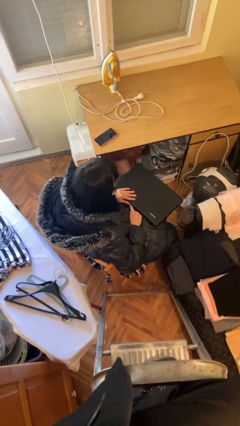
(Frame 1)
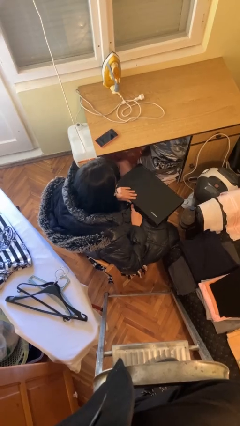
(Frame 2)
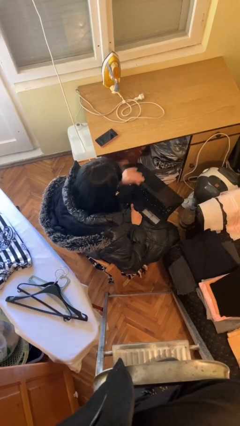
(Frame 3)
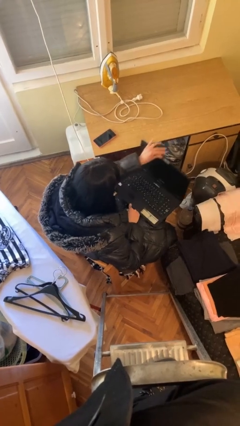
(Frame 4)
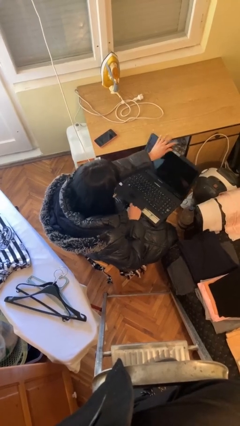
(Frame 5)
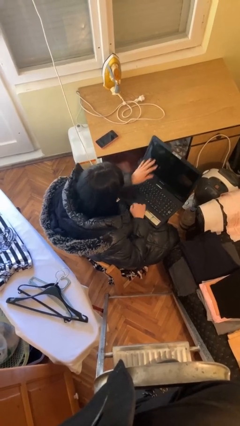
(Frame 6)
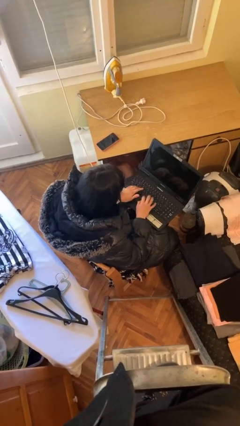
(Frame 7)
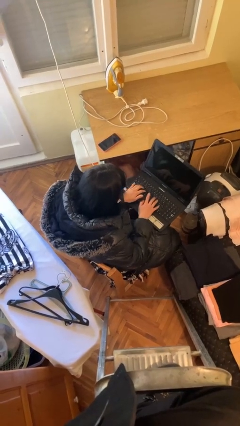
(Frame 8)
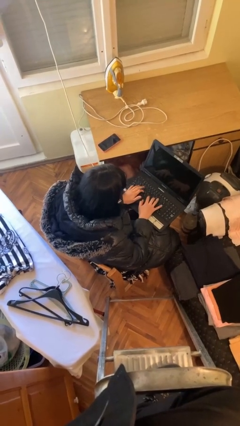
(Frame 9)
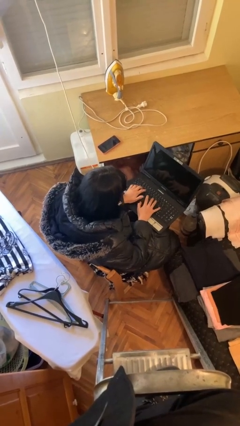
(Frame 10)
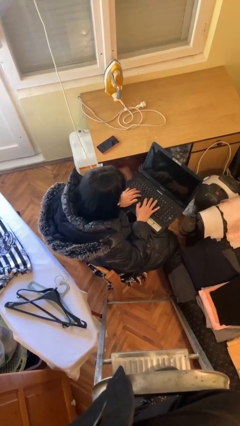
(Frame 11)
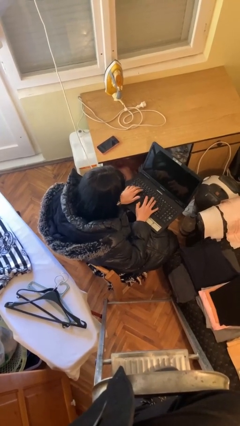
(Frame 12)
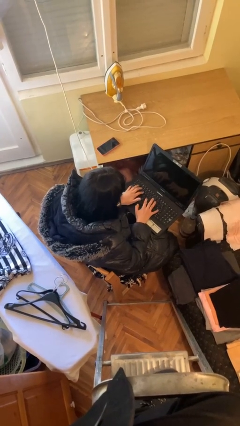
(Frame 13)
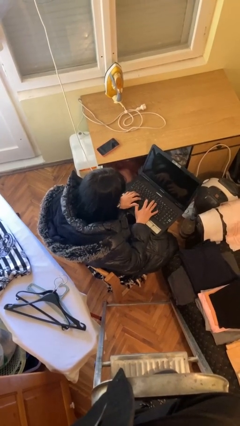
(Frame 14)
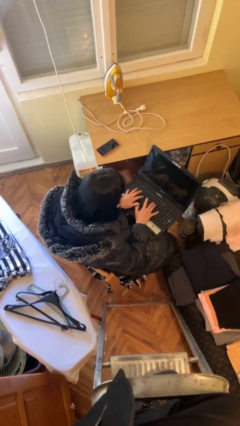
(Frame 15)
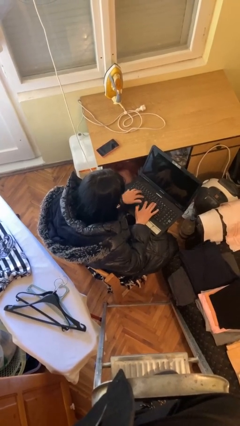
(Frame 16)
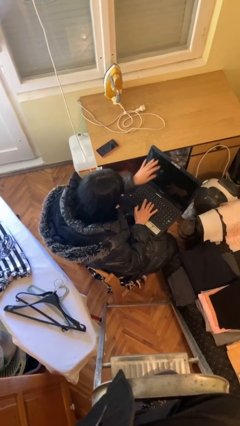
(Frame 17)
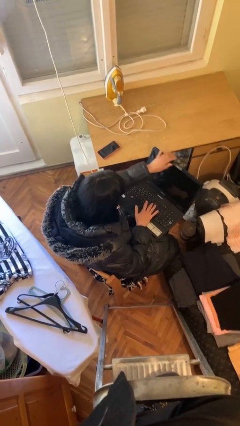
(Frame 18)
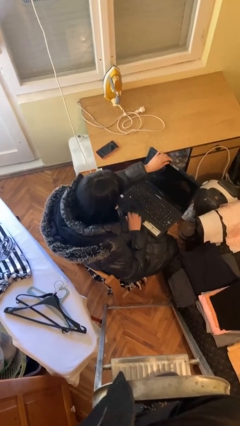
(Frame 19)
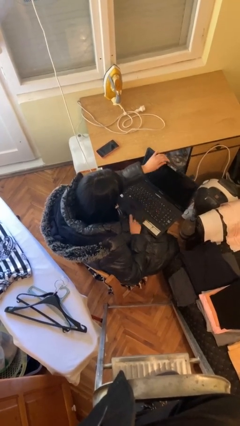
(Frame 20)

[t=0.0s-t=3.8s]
person interacts with laptop

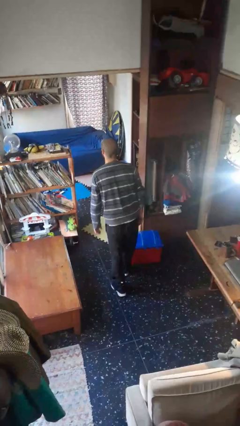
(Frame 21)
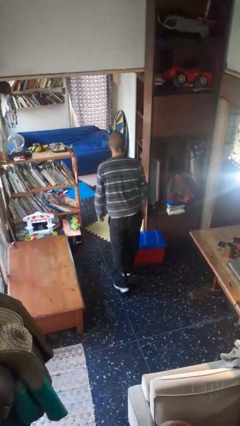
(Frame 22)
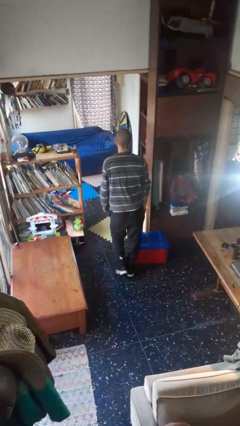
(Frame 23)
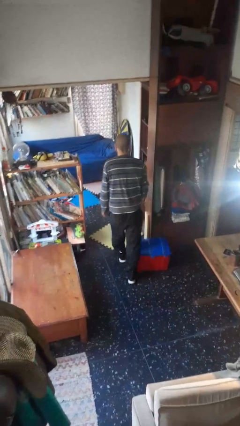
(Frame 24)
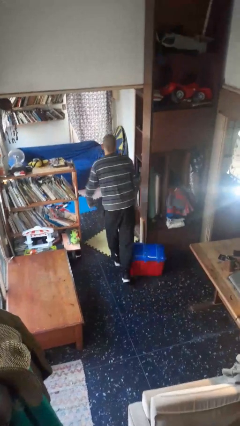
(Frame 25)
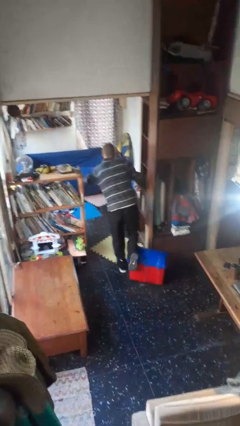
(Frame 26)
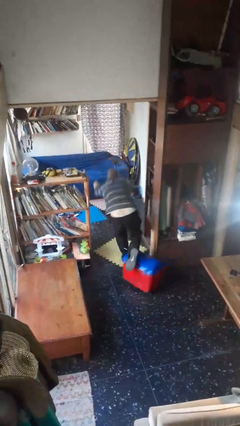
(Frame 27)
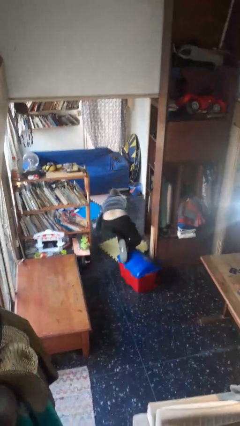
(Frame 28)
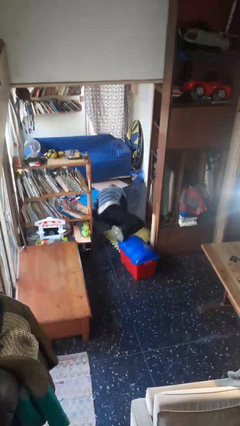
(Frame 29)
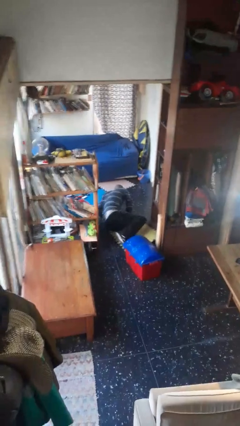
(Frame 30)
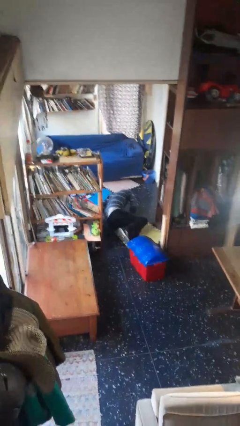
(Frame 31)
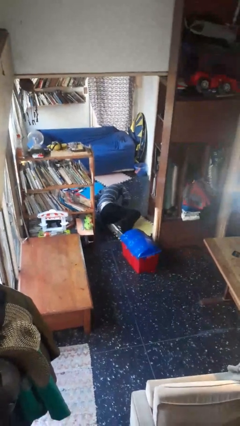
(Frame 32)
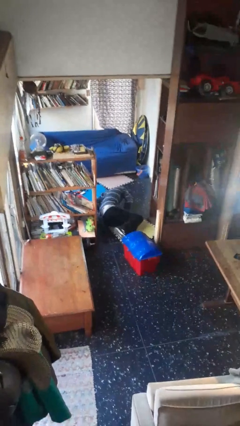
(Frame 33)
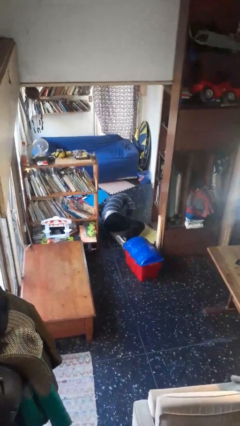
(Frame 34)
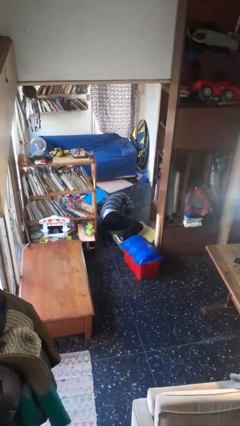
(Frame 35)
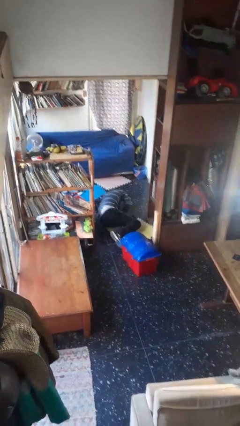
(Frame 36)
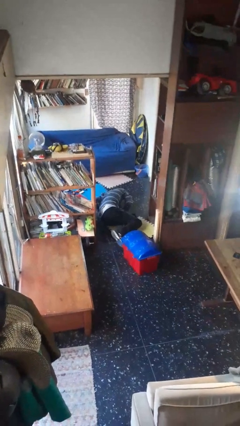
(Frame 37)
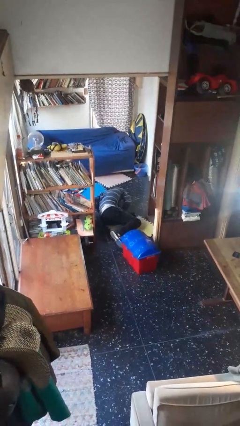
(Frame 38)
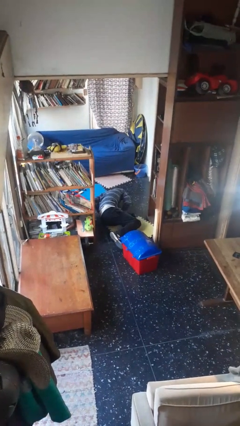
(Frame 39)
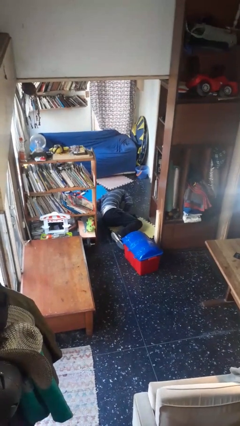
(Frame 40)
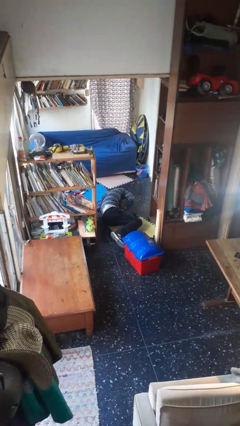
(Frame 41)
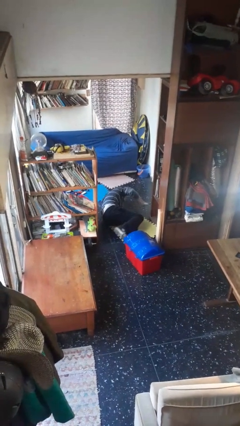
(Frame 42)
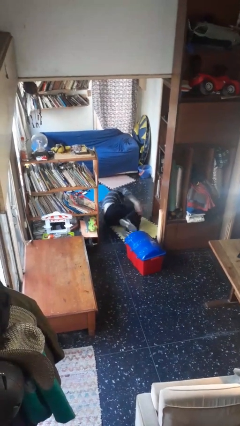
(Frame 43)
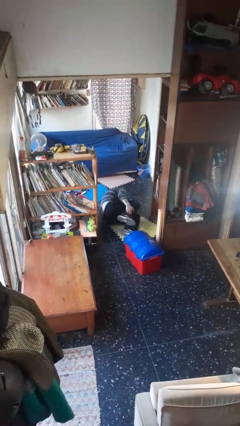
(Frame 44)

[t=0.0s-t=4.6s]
person trips on object on floor

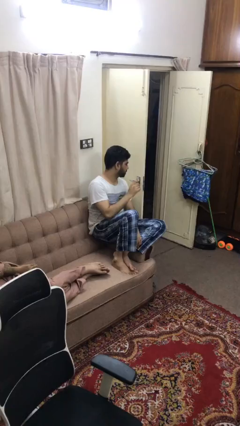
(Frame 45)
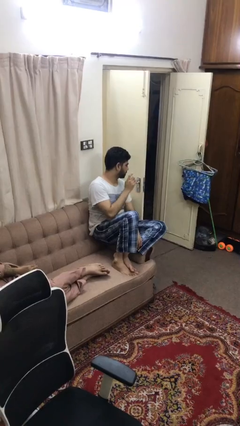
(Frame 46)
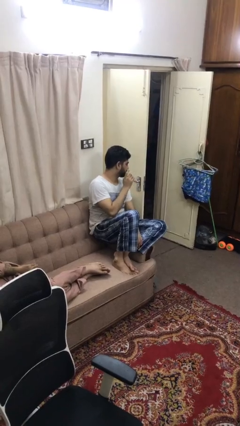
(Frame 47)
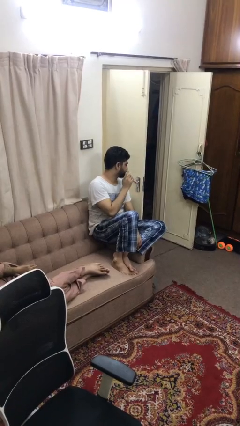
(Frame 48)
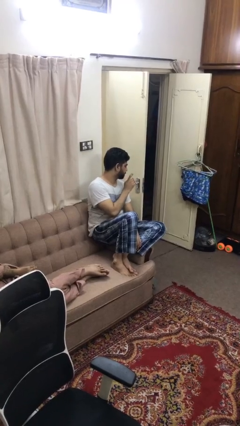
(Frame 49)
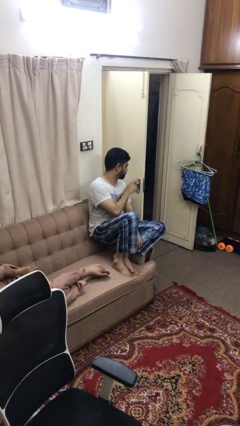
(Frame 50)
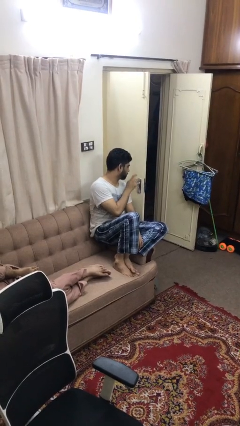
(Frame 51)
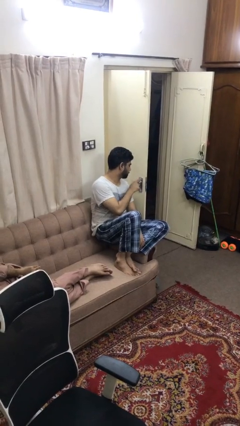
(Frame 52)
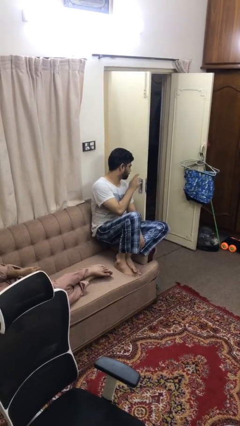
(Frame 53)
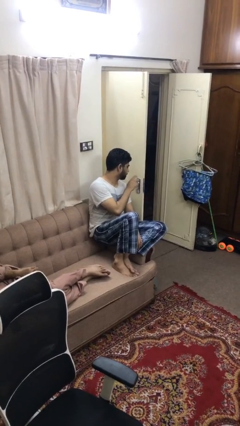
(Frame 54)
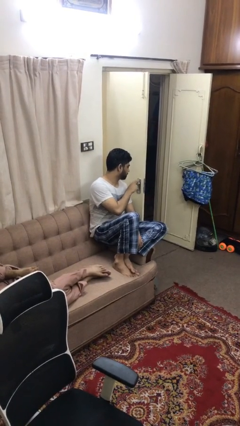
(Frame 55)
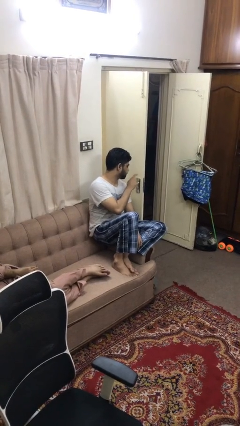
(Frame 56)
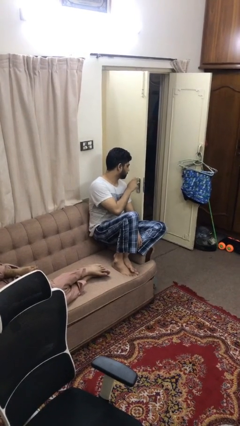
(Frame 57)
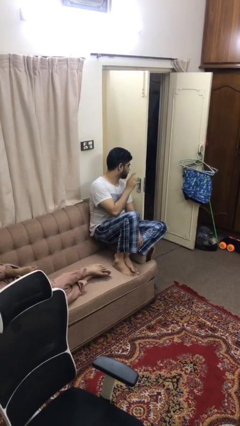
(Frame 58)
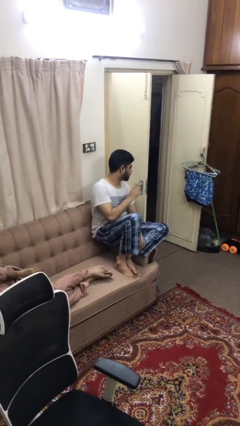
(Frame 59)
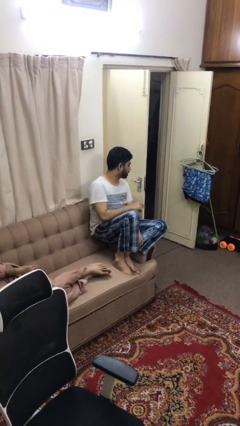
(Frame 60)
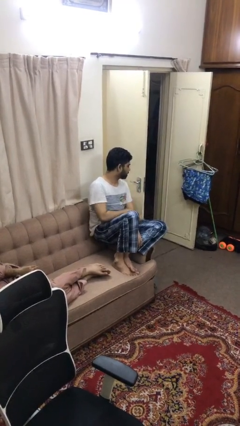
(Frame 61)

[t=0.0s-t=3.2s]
person taps object with finger

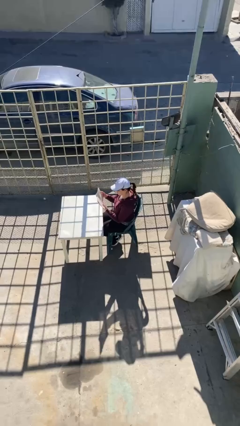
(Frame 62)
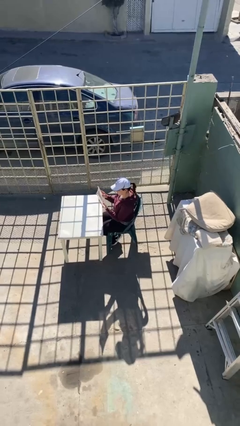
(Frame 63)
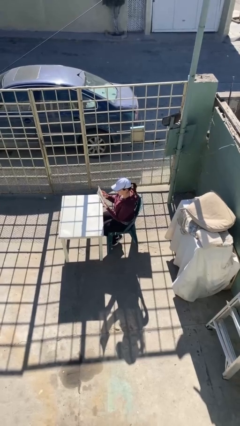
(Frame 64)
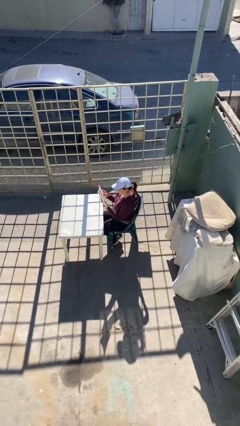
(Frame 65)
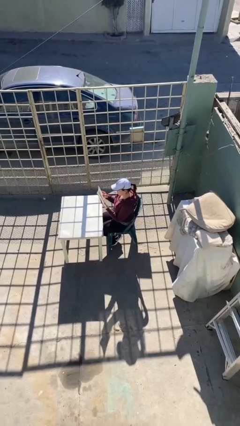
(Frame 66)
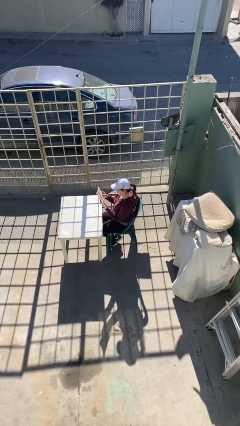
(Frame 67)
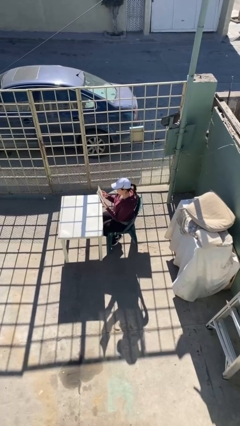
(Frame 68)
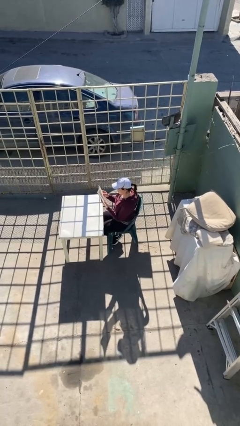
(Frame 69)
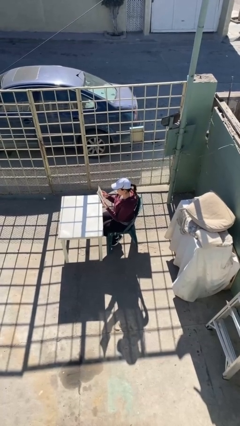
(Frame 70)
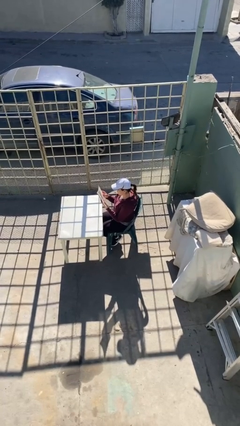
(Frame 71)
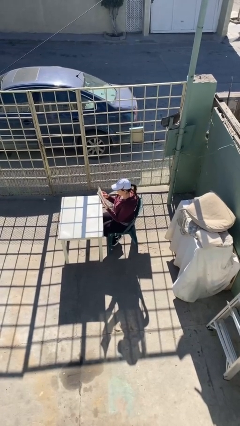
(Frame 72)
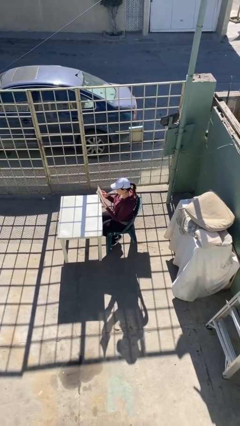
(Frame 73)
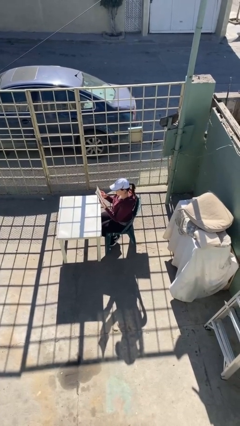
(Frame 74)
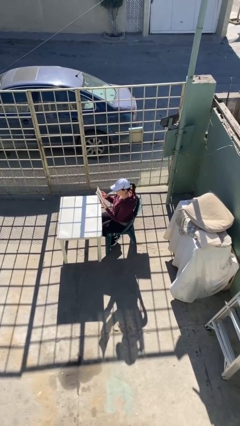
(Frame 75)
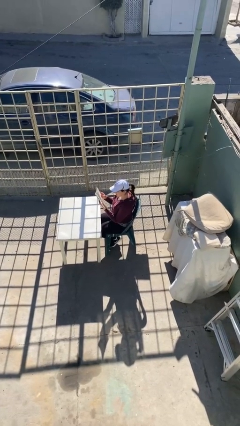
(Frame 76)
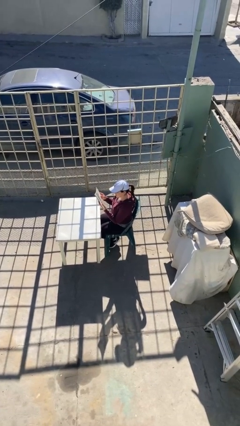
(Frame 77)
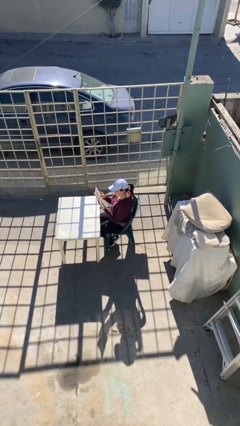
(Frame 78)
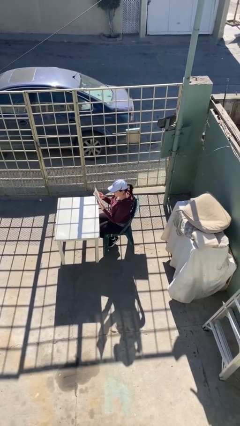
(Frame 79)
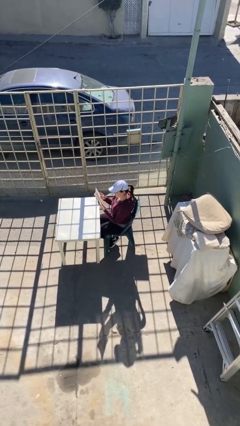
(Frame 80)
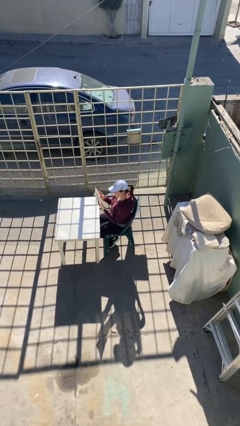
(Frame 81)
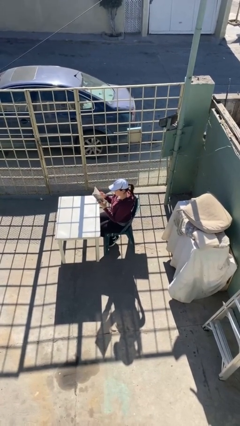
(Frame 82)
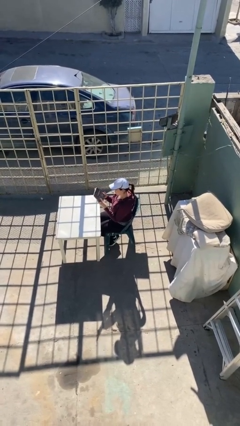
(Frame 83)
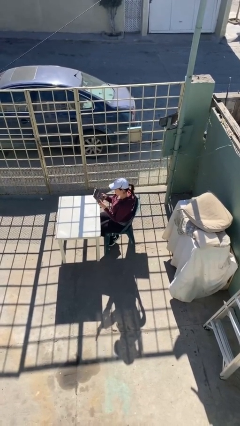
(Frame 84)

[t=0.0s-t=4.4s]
person reads document

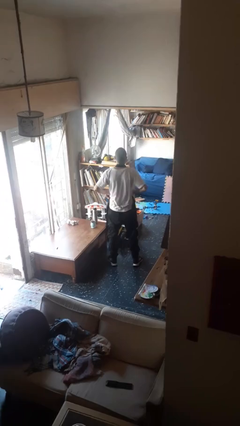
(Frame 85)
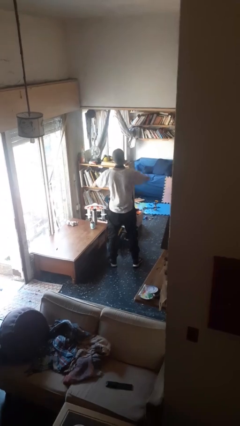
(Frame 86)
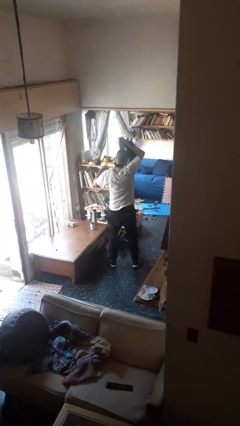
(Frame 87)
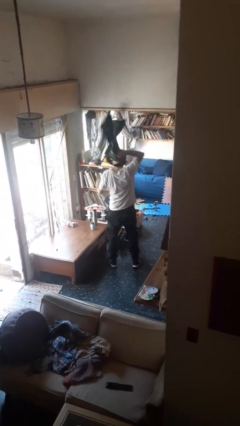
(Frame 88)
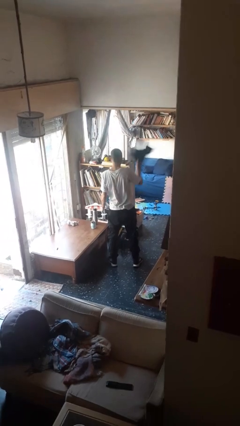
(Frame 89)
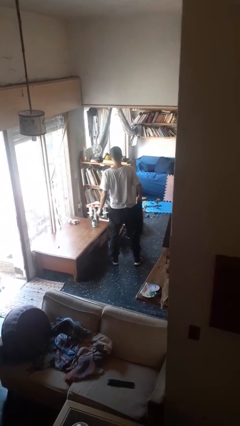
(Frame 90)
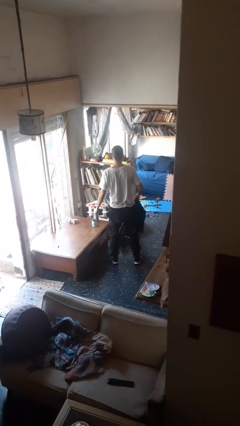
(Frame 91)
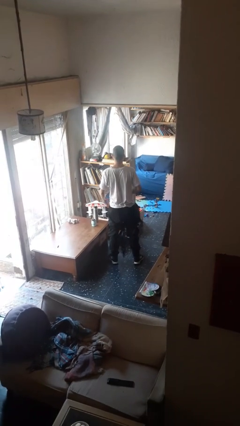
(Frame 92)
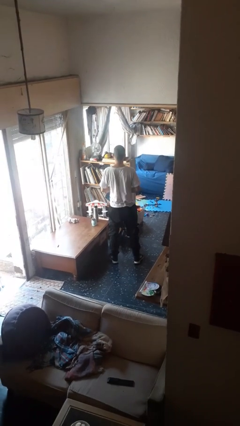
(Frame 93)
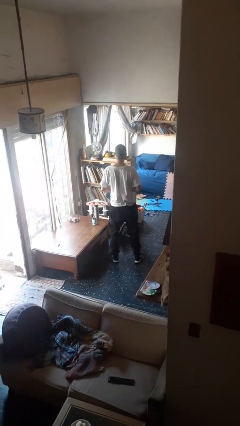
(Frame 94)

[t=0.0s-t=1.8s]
person takes off apron
